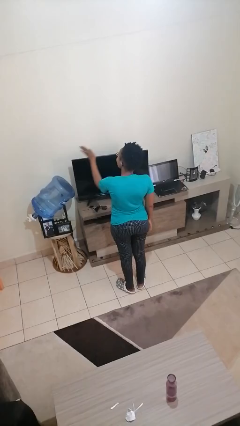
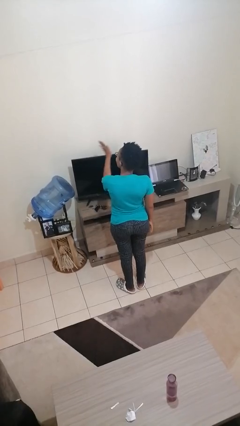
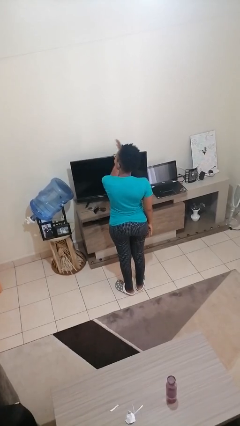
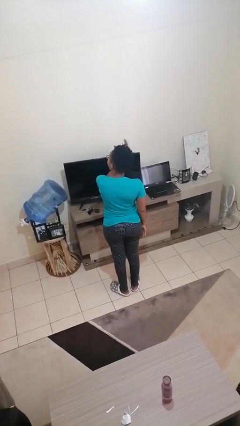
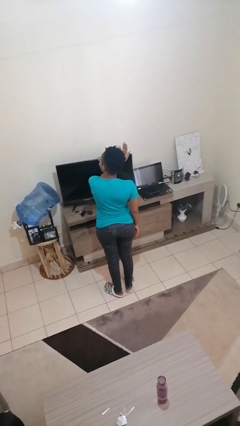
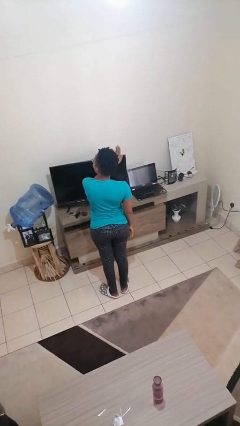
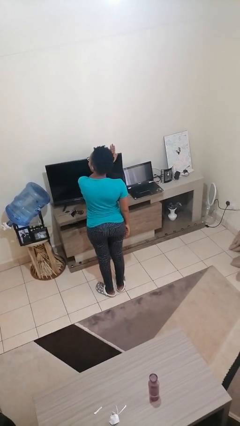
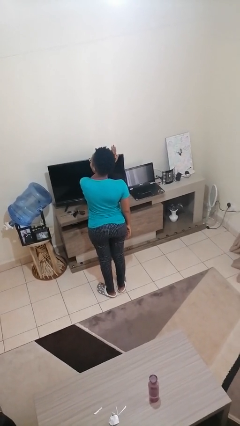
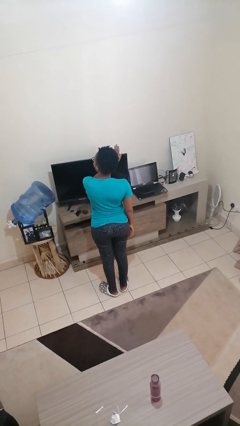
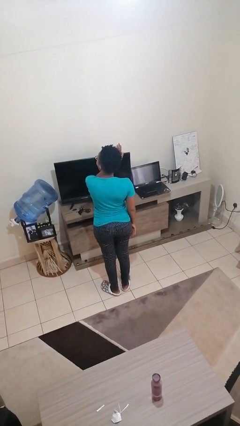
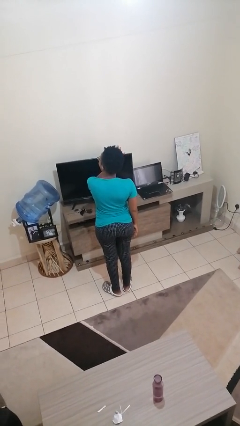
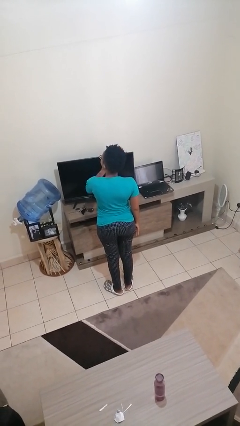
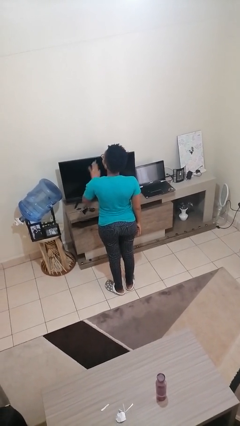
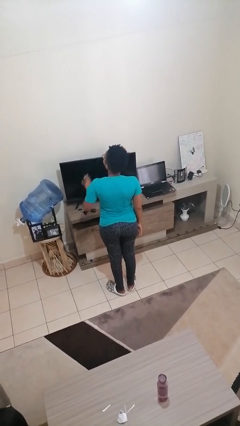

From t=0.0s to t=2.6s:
person gestures swipe right

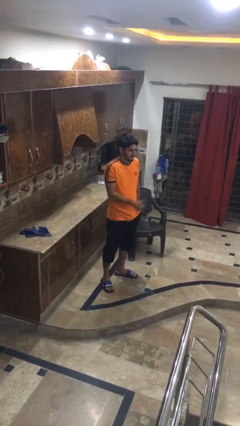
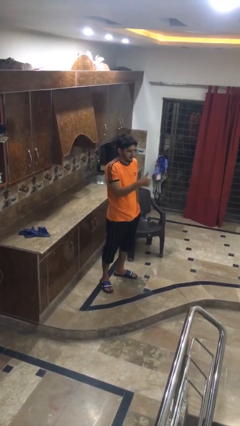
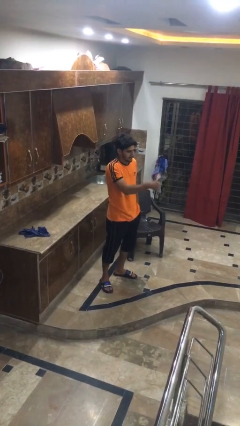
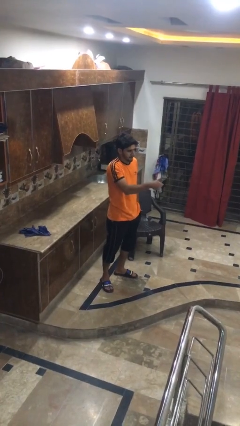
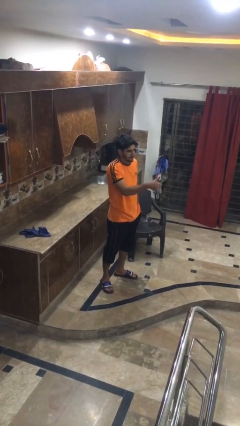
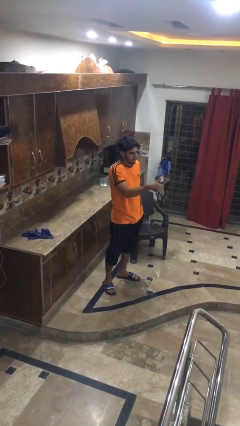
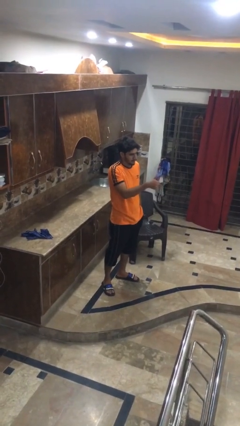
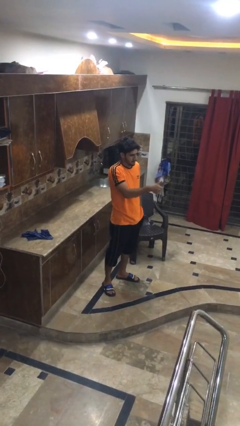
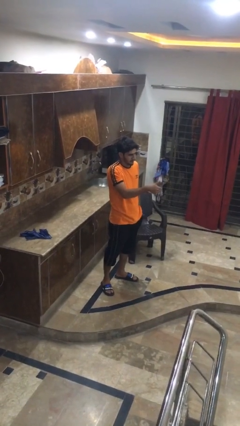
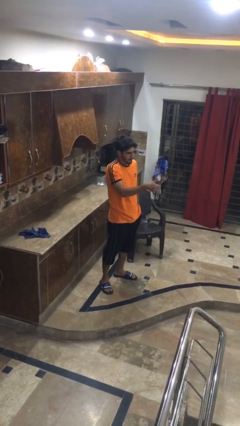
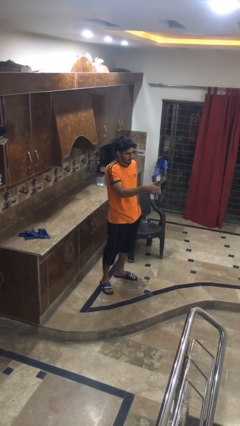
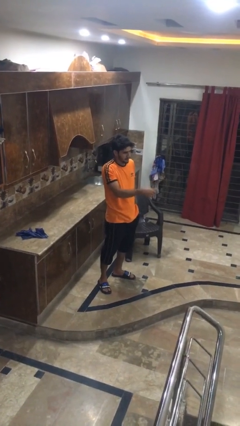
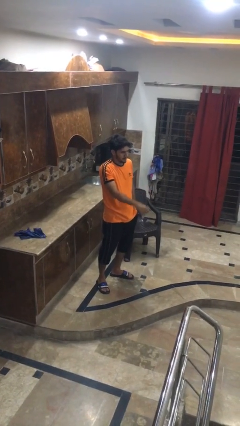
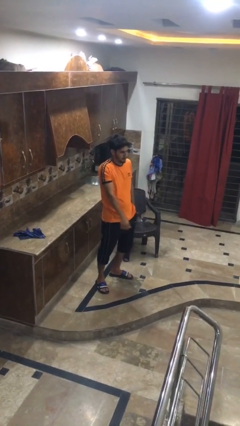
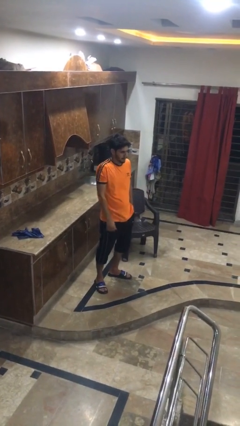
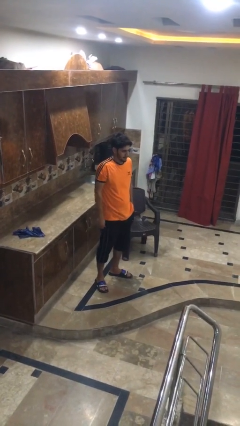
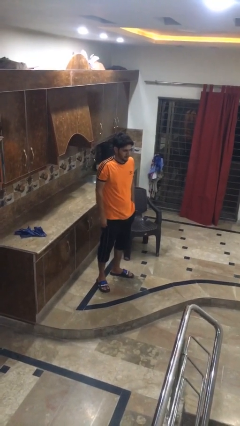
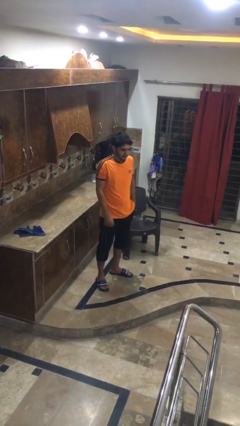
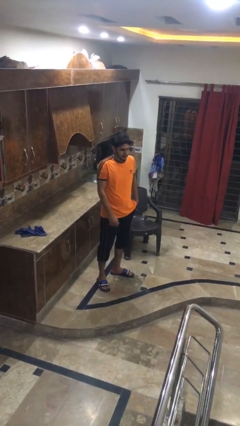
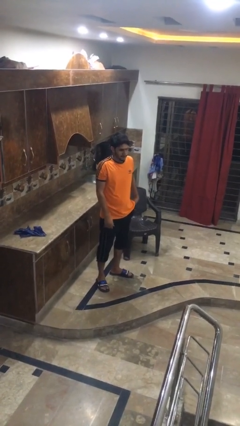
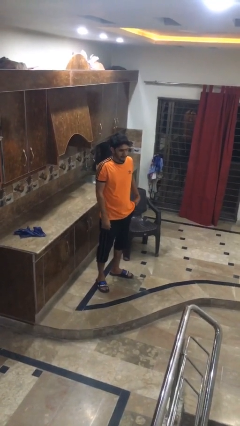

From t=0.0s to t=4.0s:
person gestures thumbs up

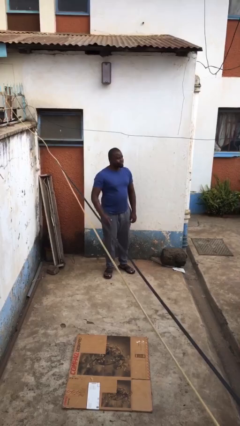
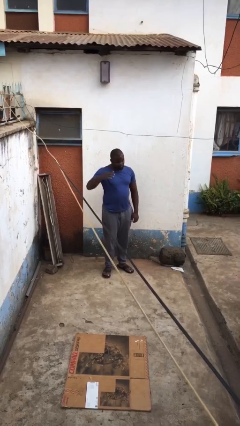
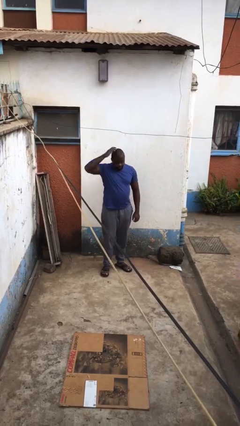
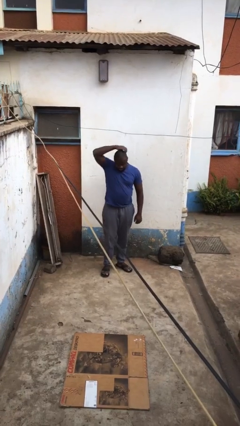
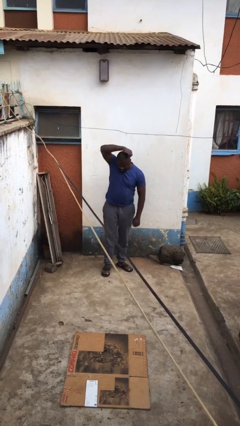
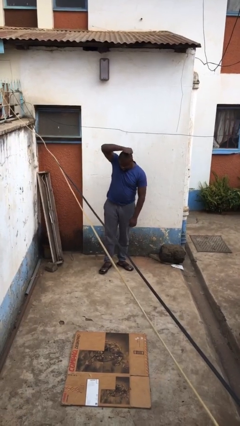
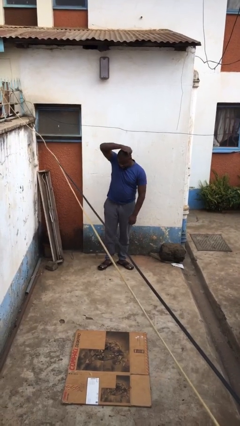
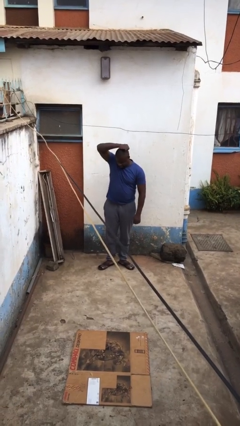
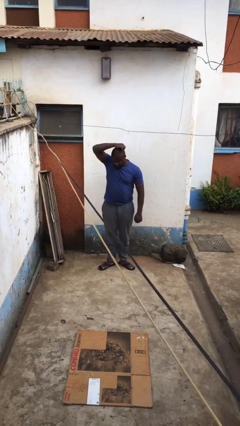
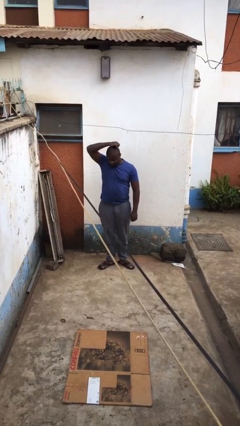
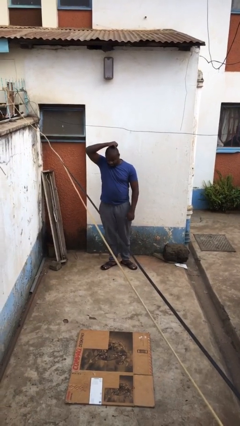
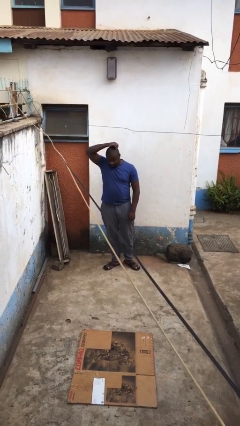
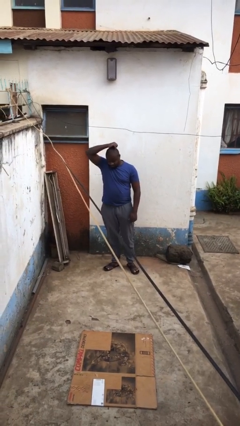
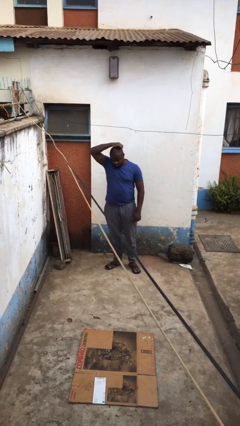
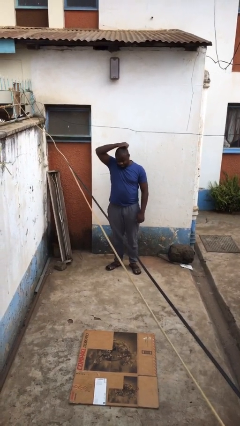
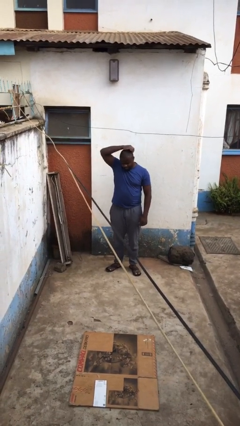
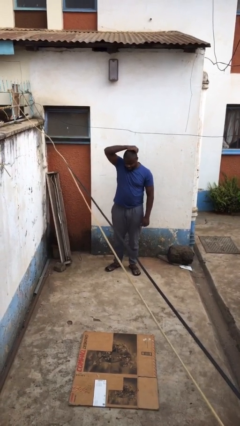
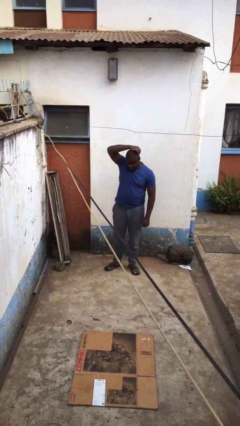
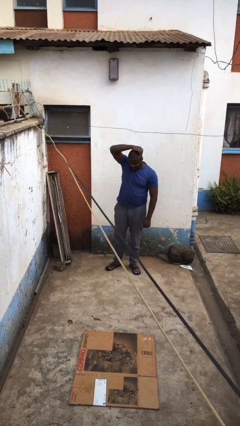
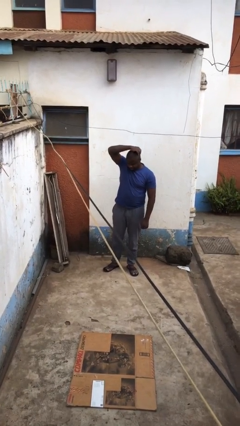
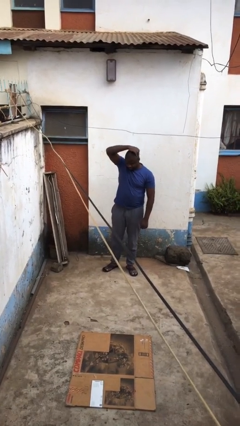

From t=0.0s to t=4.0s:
person scratches face

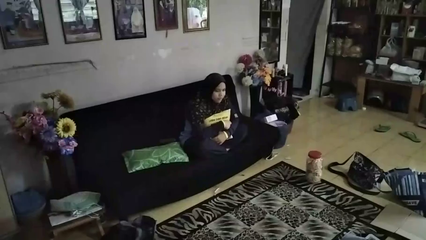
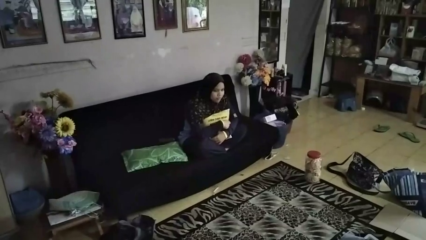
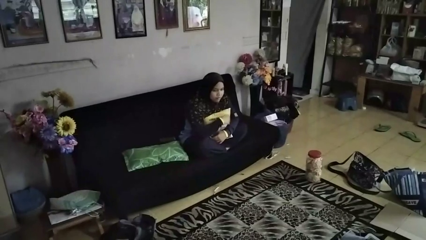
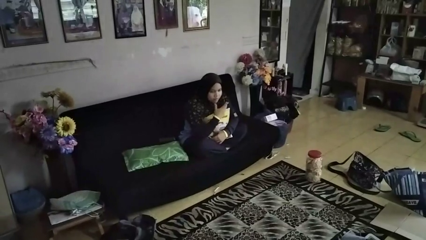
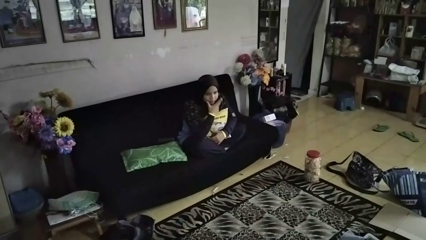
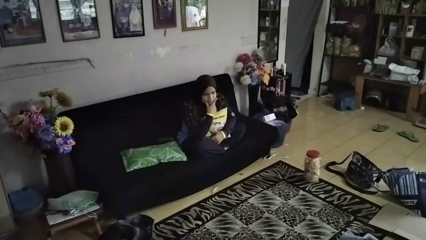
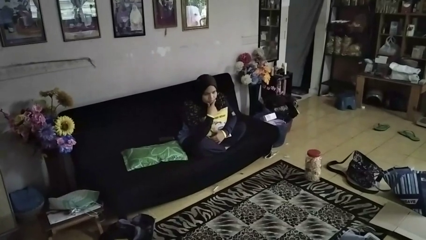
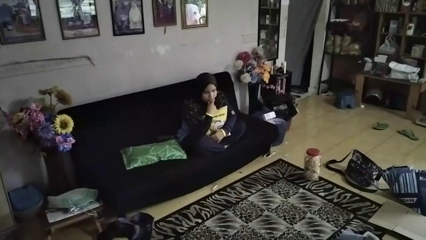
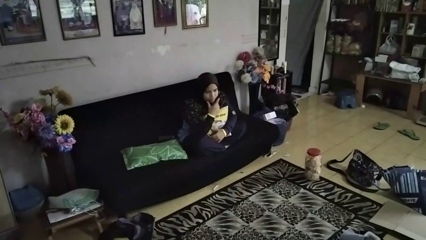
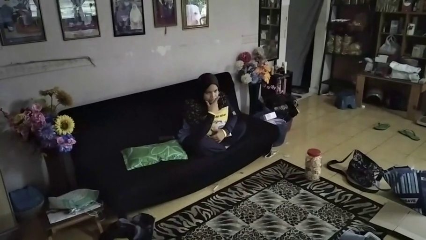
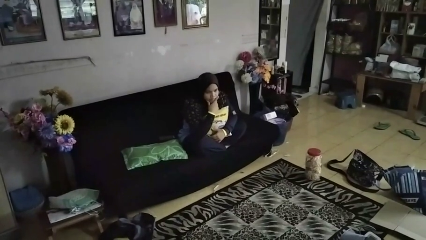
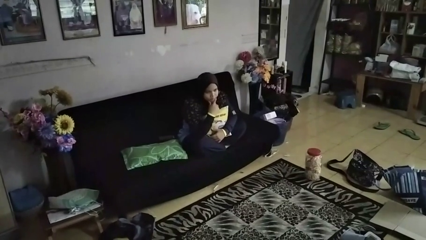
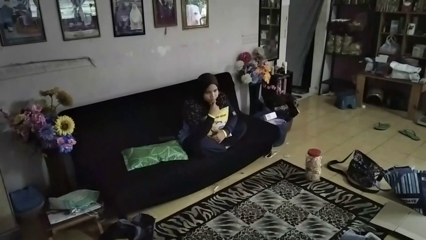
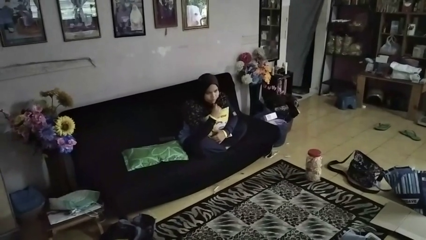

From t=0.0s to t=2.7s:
person strokes chin

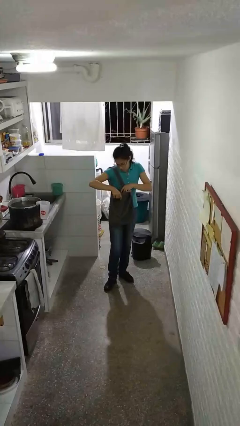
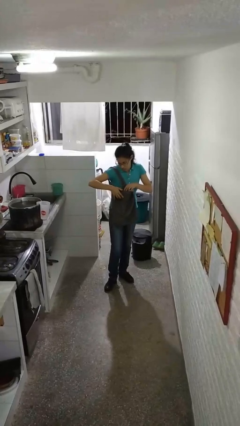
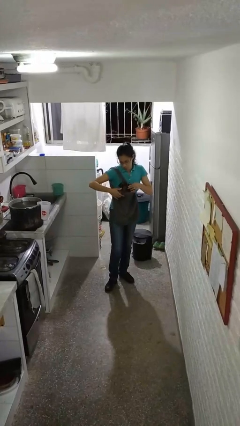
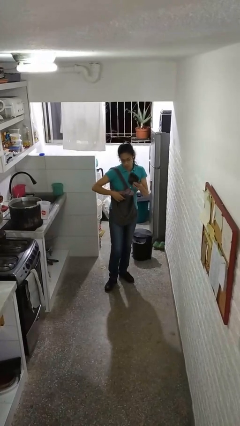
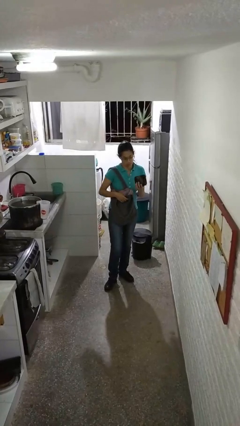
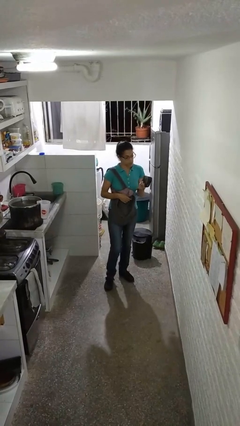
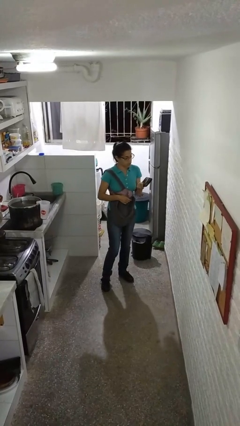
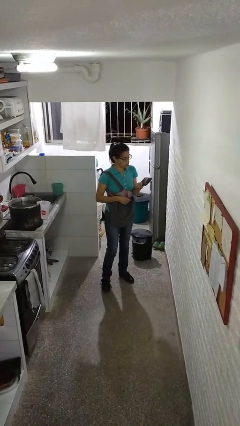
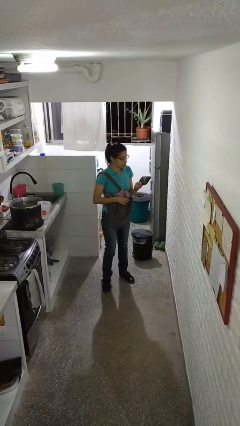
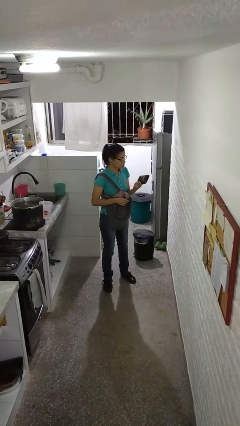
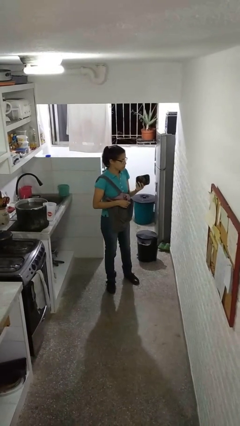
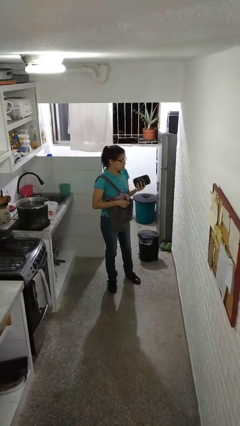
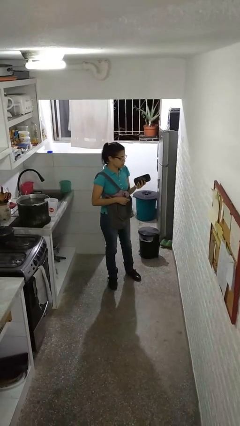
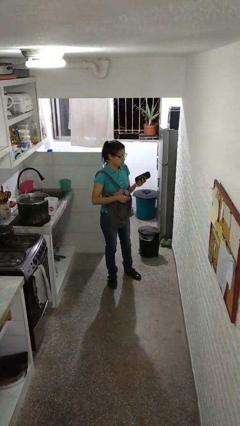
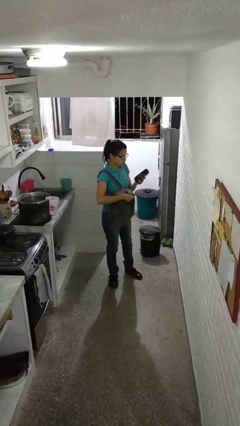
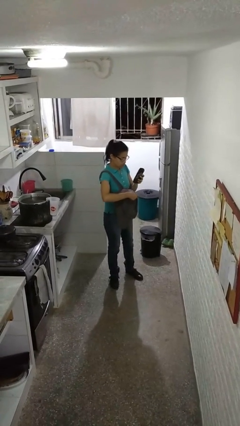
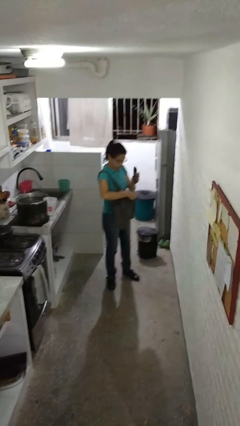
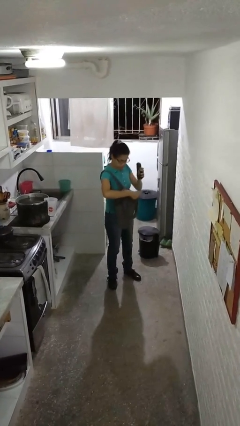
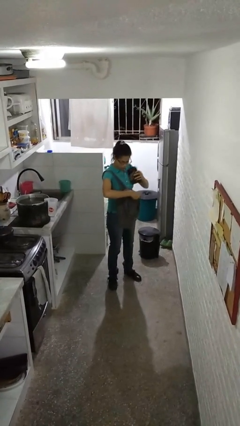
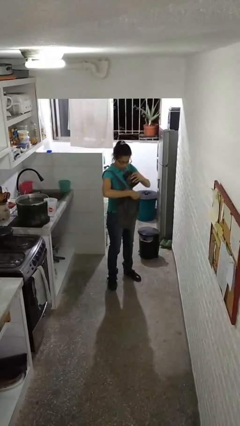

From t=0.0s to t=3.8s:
person takes object from purse

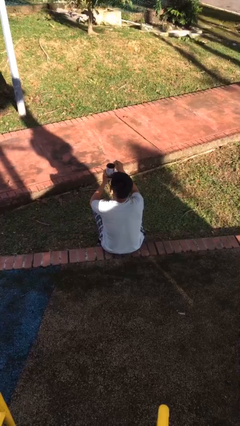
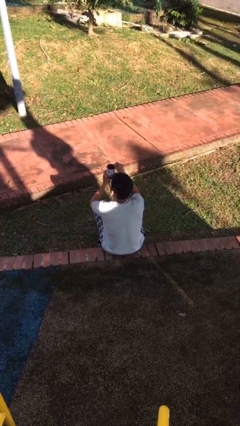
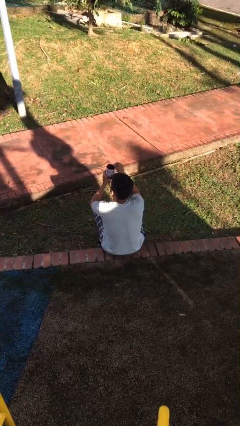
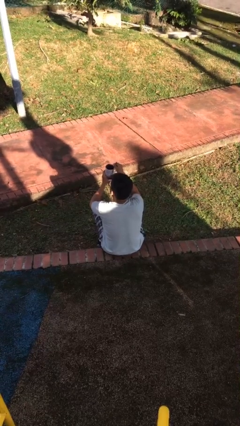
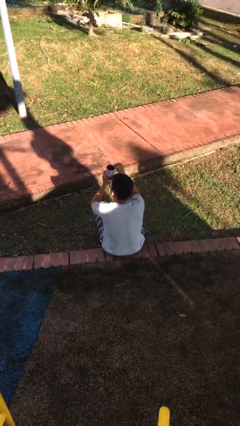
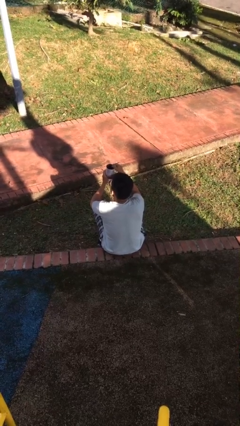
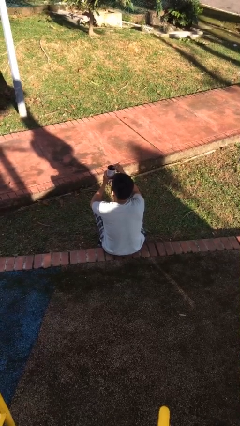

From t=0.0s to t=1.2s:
person stirs mug
